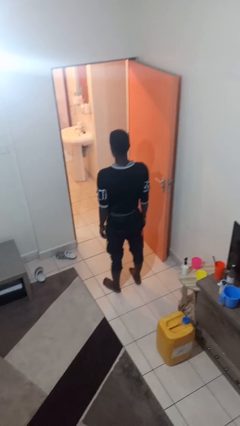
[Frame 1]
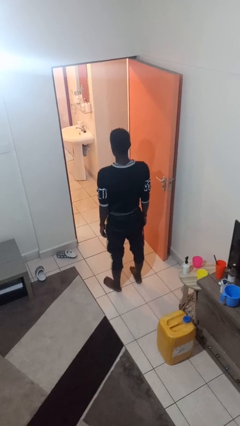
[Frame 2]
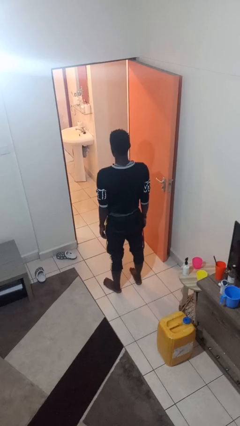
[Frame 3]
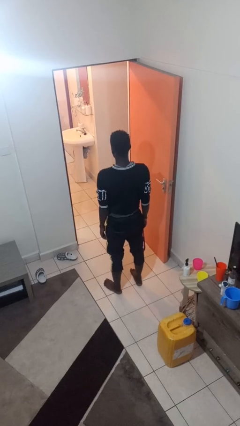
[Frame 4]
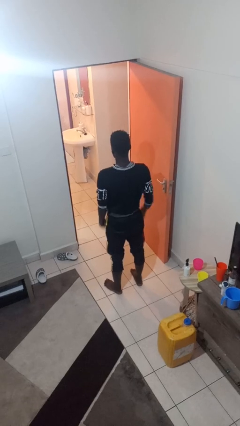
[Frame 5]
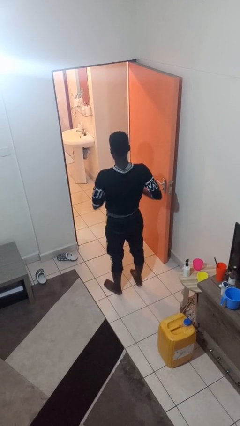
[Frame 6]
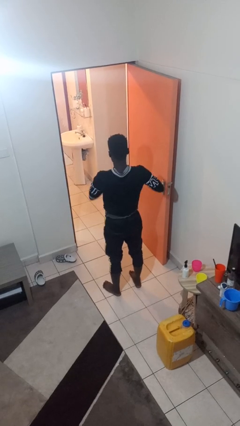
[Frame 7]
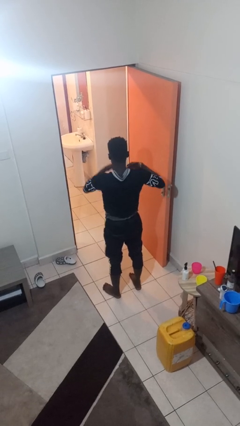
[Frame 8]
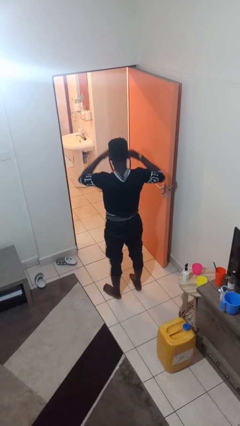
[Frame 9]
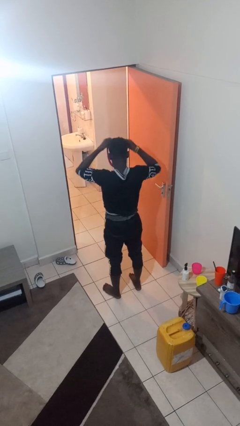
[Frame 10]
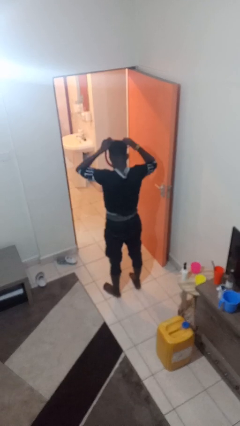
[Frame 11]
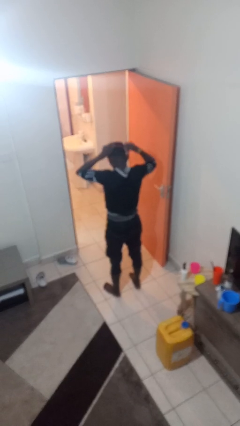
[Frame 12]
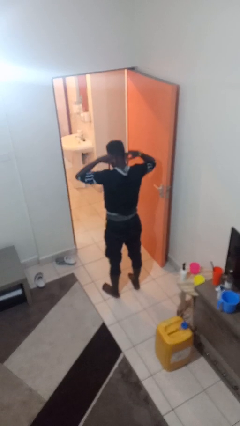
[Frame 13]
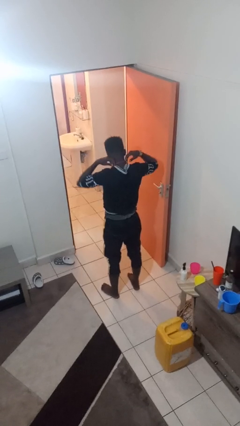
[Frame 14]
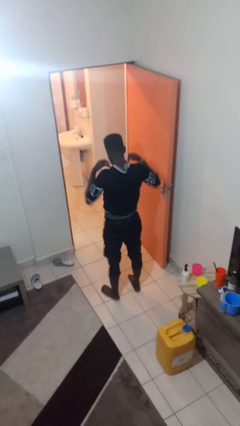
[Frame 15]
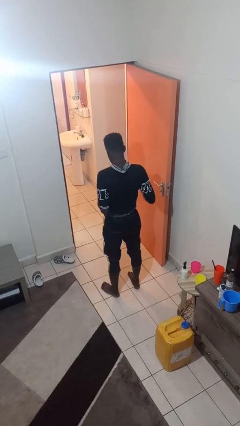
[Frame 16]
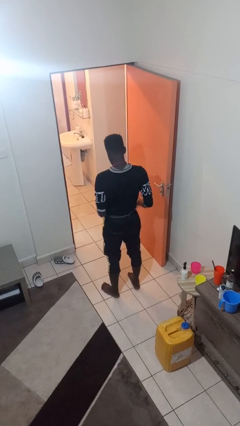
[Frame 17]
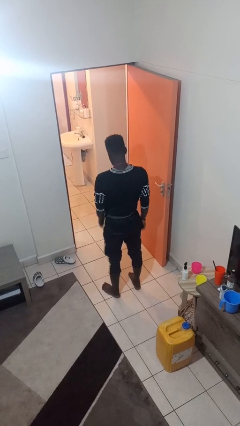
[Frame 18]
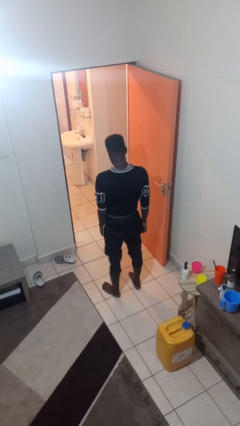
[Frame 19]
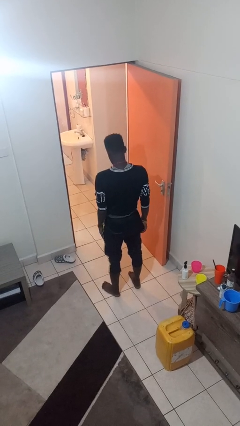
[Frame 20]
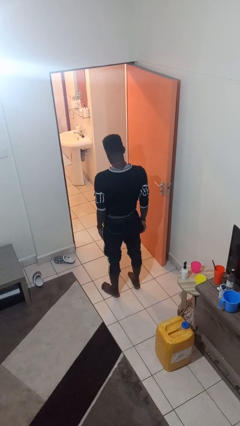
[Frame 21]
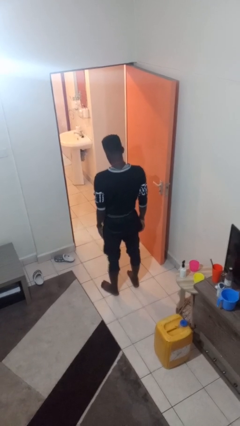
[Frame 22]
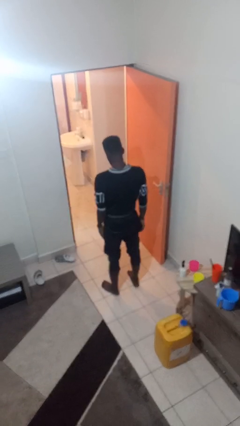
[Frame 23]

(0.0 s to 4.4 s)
person puts on necklace

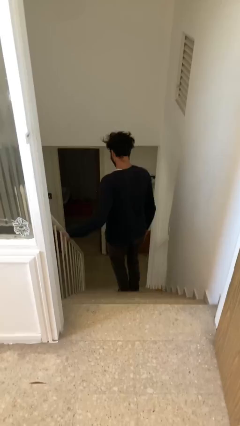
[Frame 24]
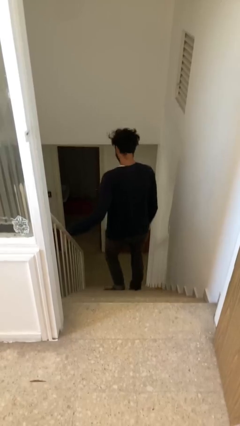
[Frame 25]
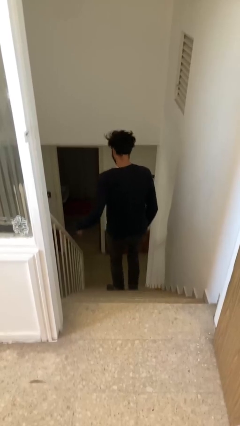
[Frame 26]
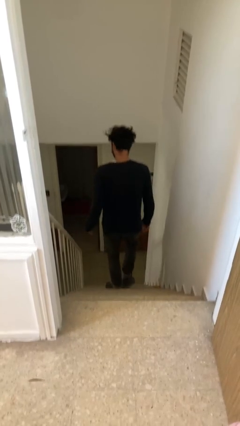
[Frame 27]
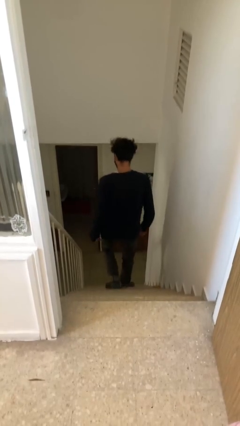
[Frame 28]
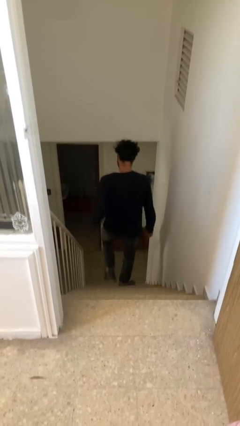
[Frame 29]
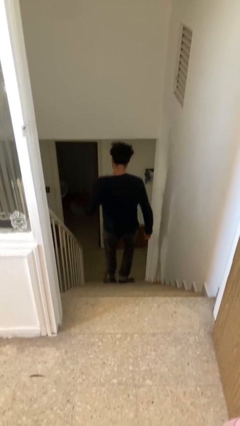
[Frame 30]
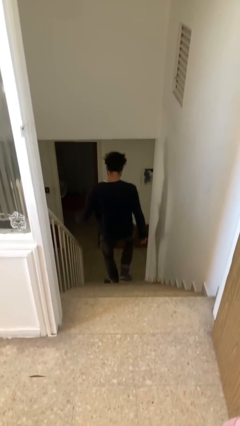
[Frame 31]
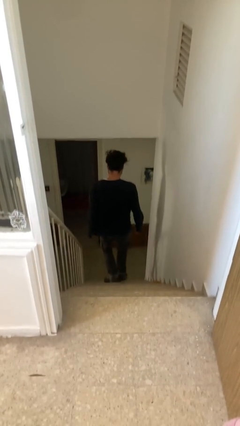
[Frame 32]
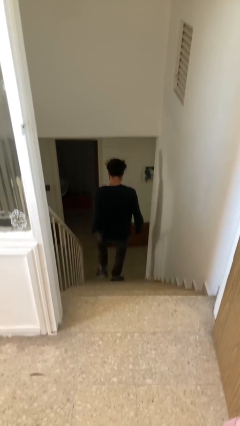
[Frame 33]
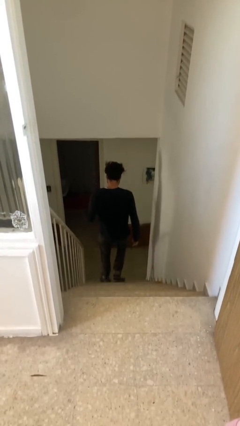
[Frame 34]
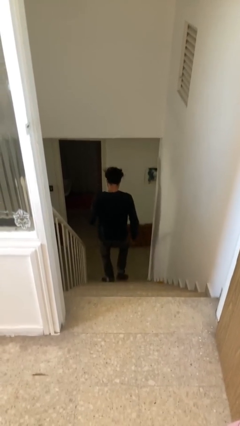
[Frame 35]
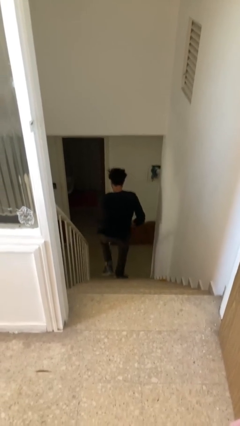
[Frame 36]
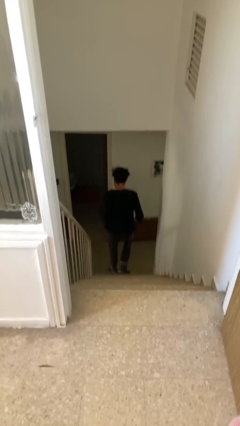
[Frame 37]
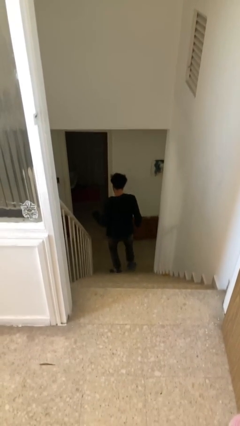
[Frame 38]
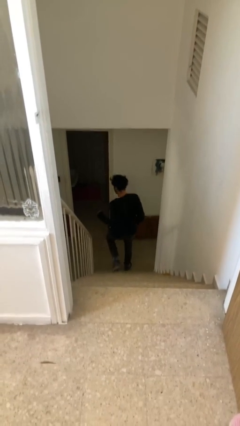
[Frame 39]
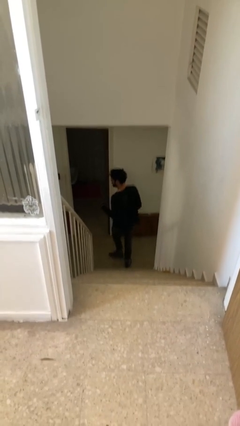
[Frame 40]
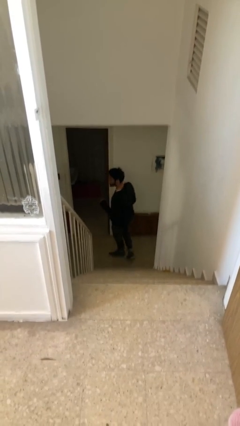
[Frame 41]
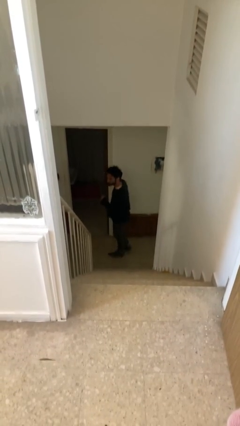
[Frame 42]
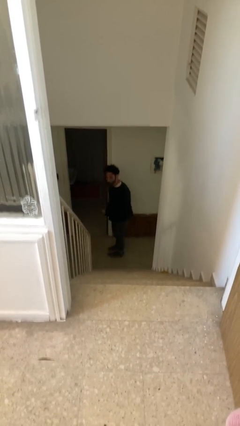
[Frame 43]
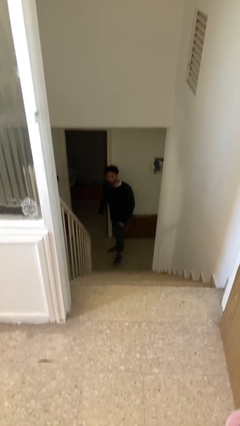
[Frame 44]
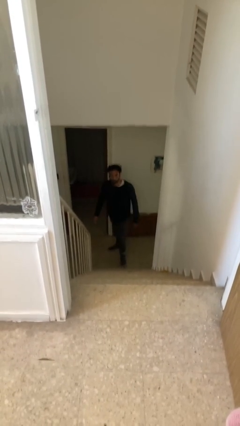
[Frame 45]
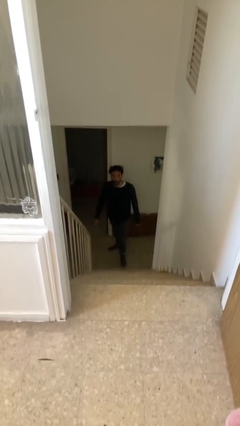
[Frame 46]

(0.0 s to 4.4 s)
person climbs down stairs

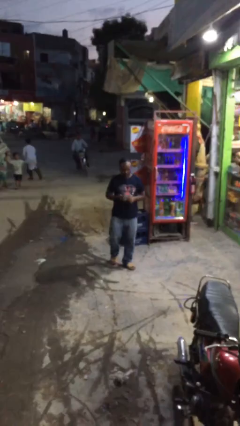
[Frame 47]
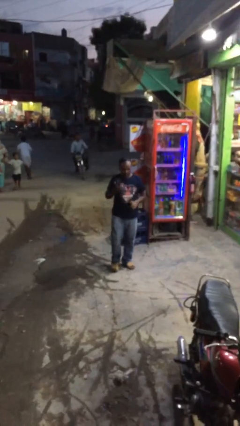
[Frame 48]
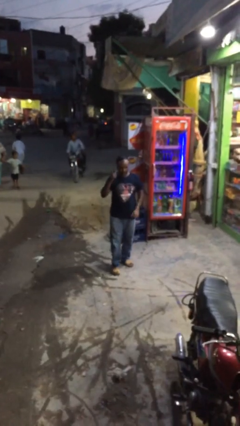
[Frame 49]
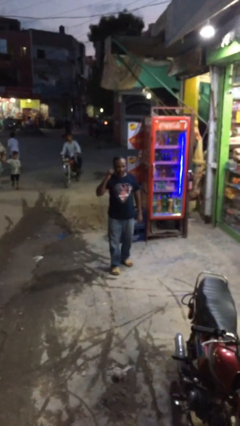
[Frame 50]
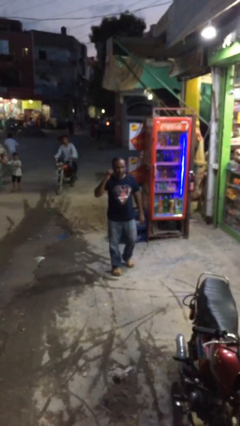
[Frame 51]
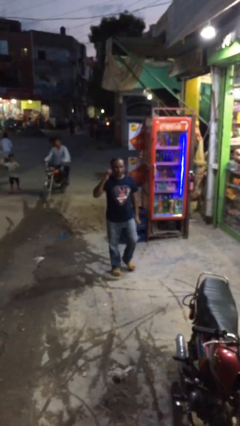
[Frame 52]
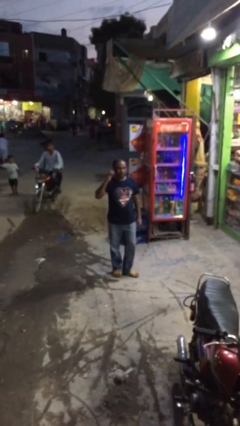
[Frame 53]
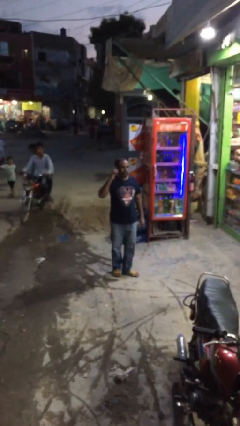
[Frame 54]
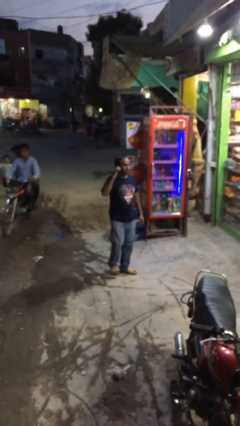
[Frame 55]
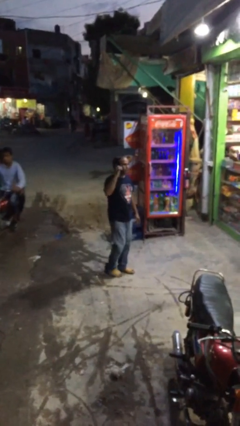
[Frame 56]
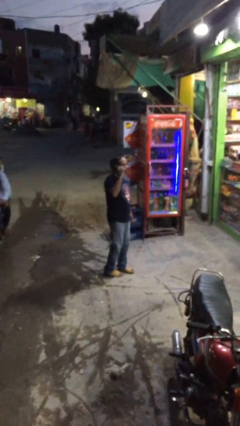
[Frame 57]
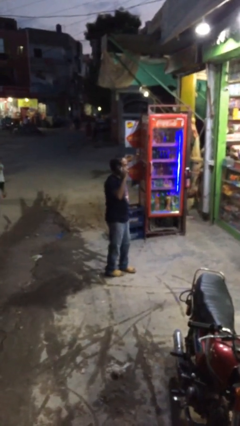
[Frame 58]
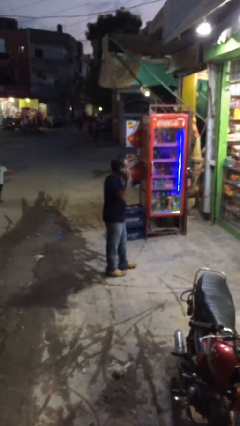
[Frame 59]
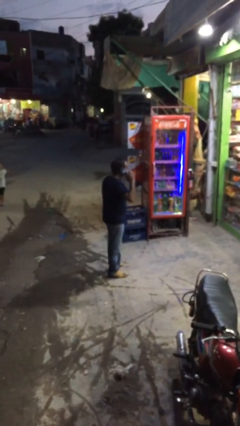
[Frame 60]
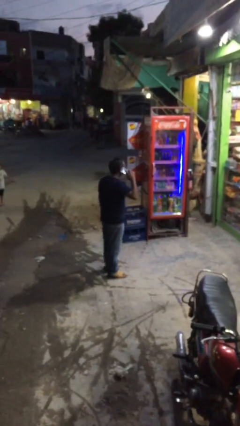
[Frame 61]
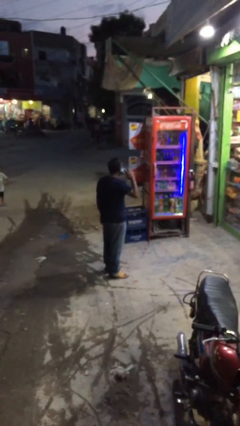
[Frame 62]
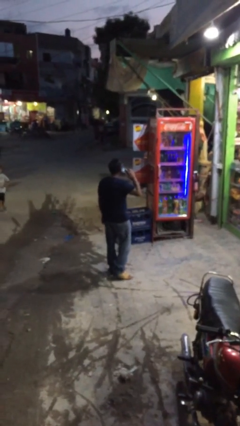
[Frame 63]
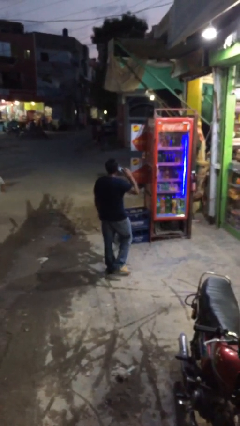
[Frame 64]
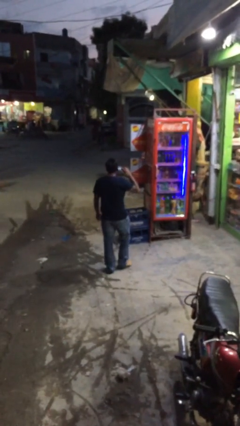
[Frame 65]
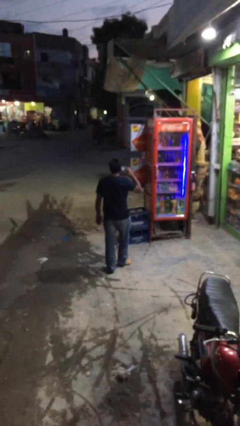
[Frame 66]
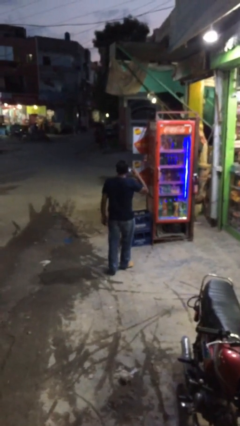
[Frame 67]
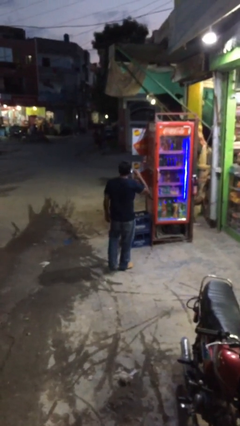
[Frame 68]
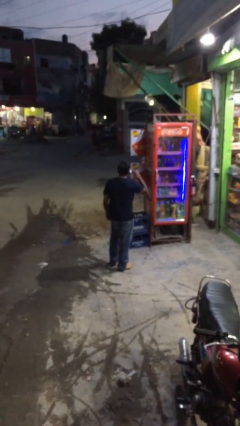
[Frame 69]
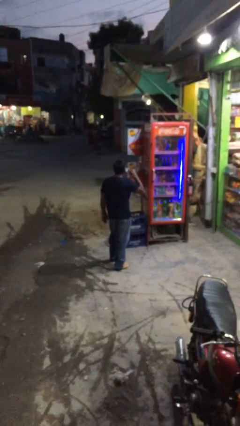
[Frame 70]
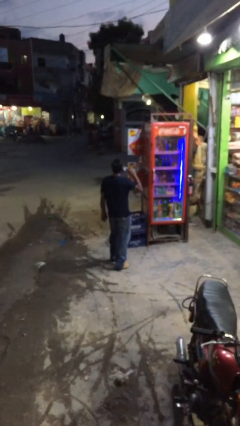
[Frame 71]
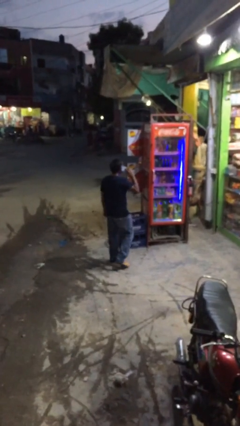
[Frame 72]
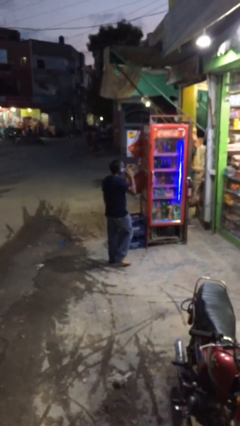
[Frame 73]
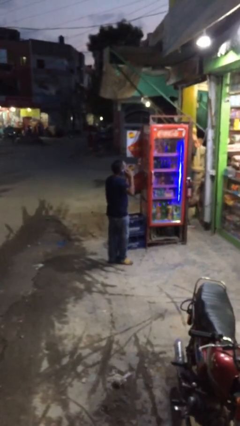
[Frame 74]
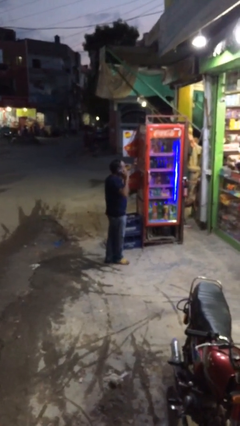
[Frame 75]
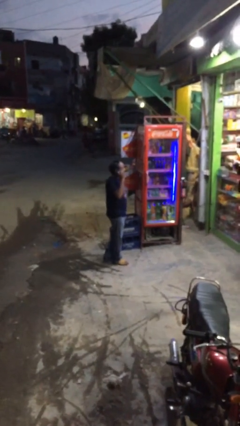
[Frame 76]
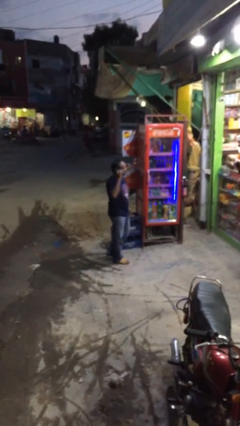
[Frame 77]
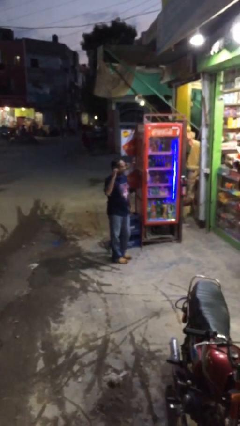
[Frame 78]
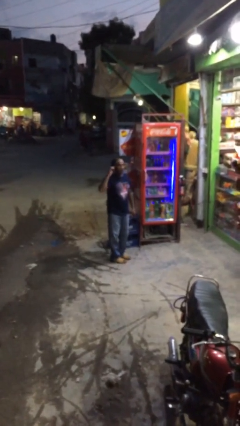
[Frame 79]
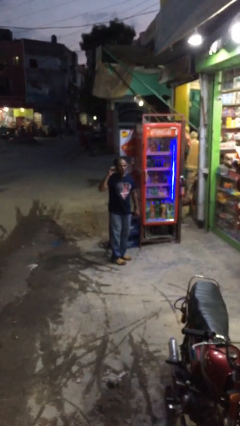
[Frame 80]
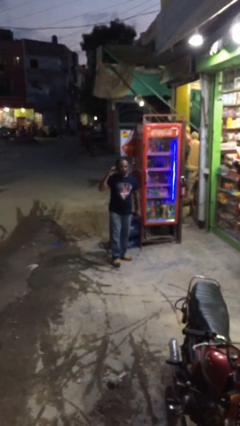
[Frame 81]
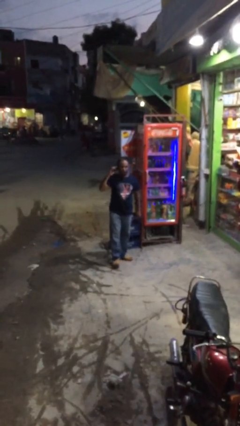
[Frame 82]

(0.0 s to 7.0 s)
person talks on phone

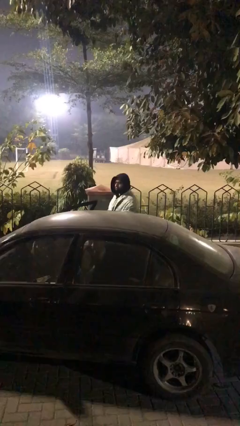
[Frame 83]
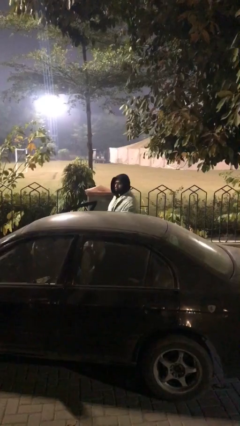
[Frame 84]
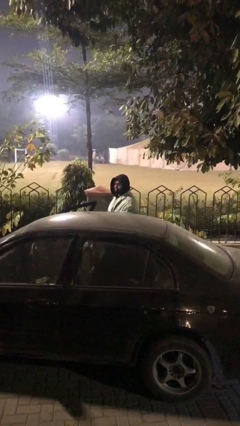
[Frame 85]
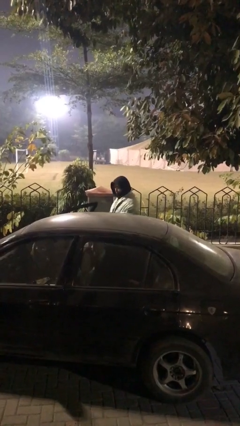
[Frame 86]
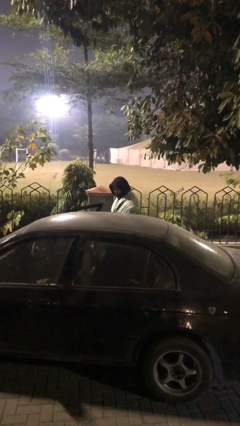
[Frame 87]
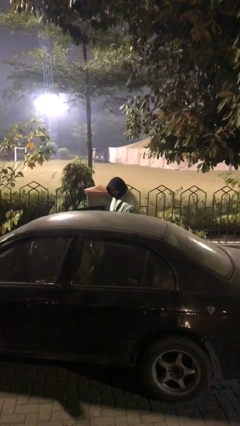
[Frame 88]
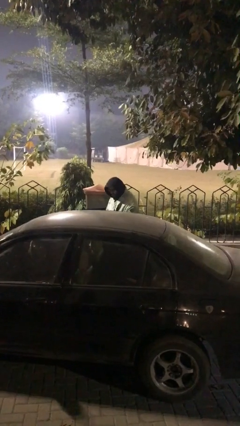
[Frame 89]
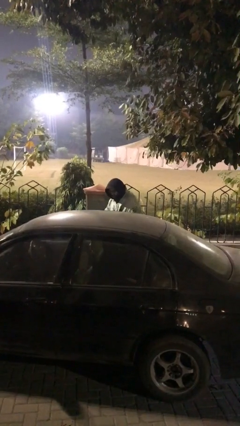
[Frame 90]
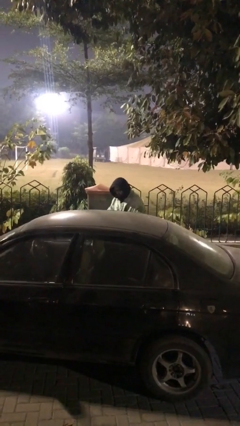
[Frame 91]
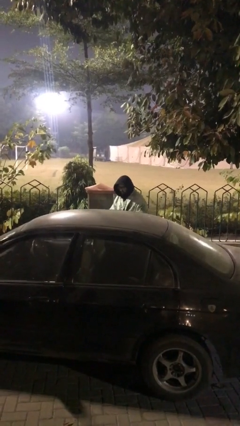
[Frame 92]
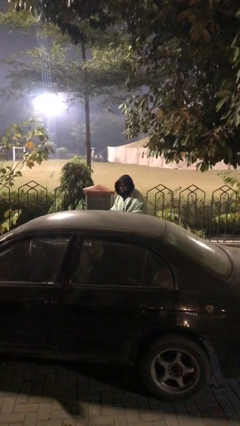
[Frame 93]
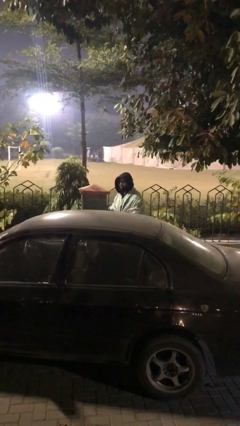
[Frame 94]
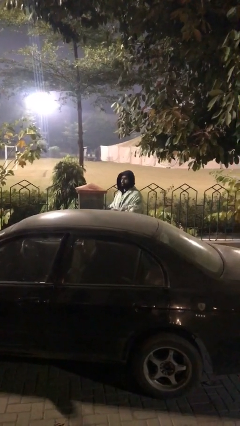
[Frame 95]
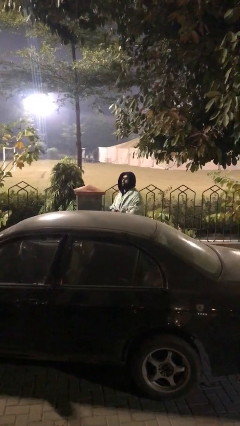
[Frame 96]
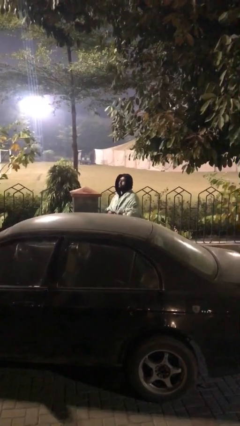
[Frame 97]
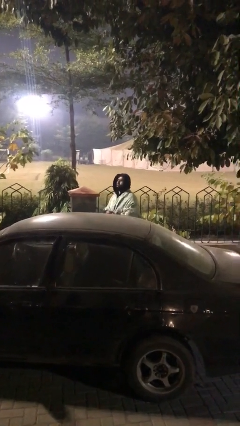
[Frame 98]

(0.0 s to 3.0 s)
person closes car door
